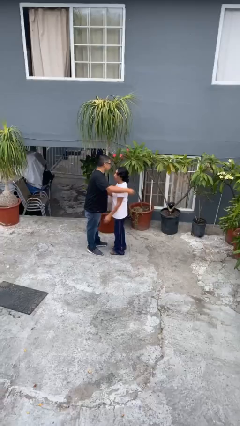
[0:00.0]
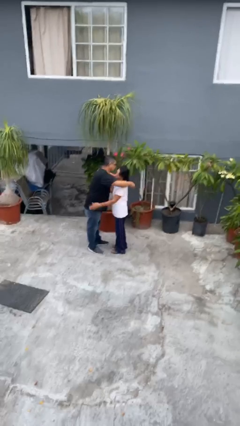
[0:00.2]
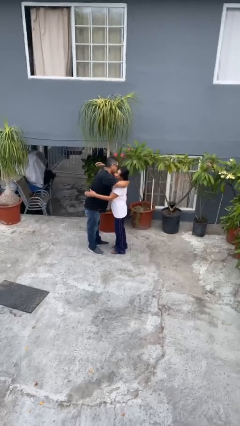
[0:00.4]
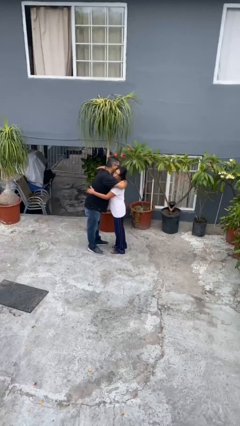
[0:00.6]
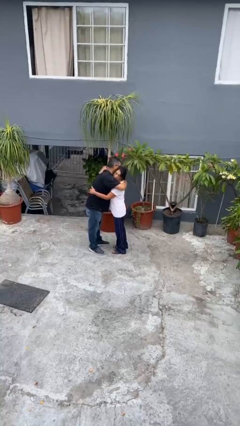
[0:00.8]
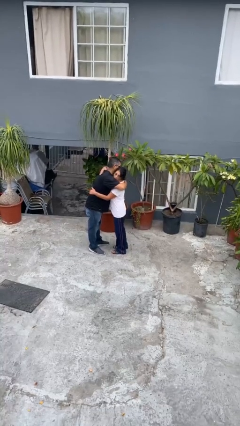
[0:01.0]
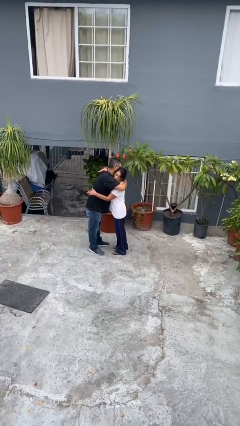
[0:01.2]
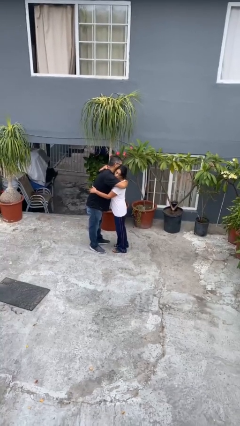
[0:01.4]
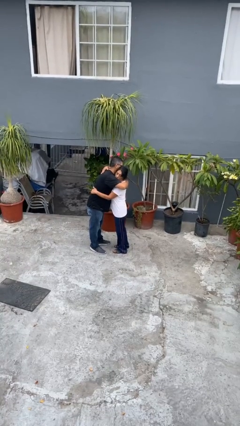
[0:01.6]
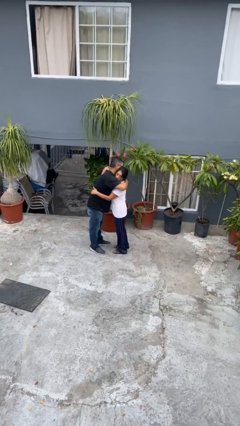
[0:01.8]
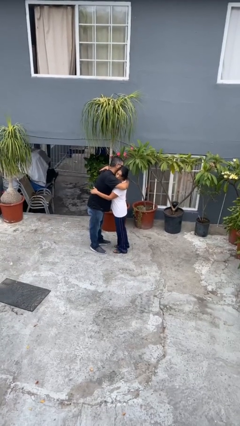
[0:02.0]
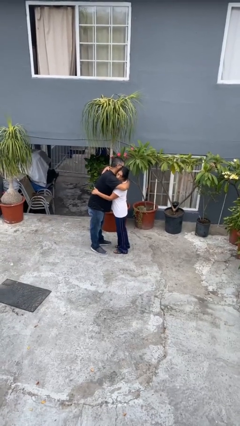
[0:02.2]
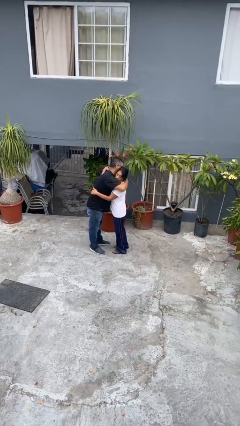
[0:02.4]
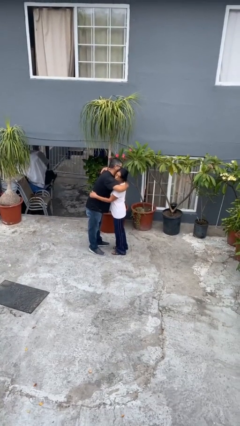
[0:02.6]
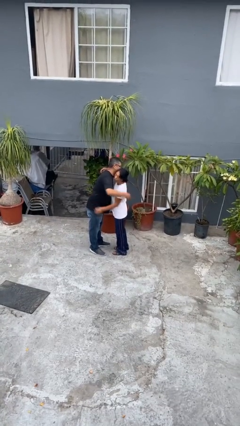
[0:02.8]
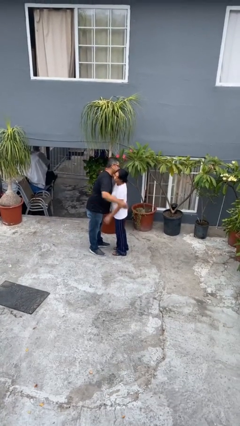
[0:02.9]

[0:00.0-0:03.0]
person embraces person

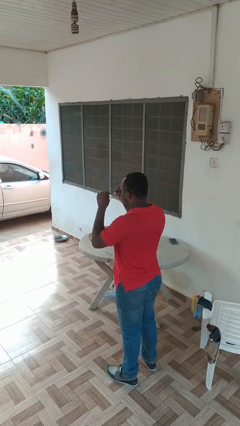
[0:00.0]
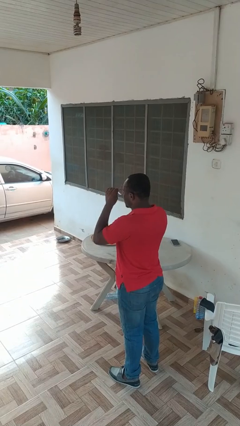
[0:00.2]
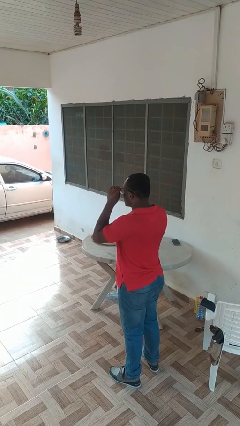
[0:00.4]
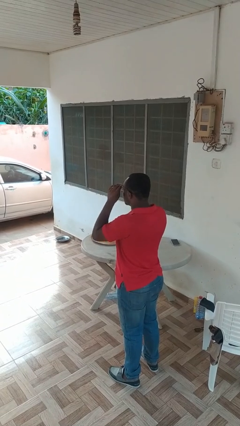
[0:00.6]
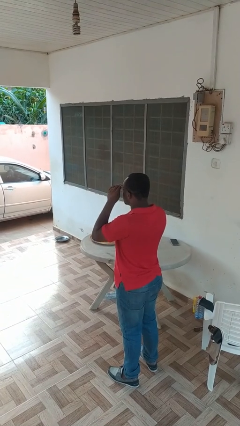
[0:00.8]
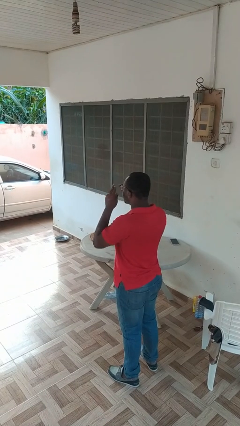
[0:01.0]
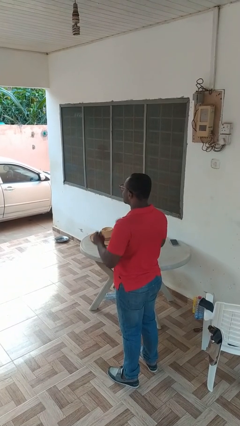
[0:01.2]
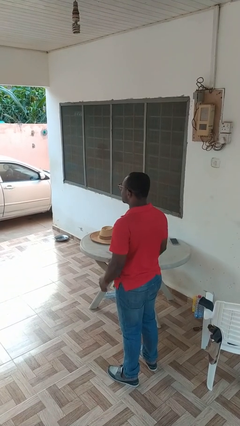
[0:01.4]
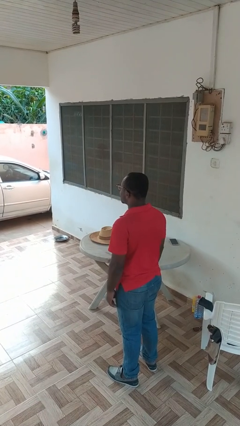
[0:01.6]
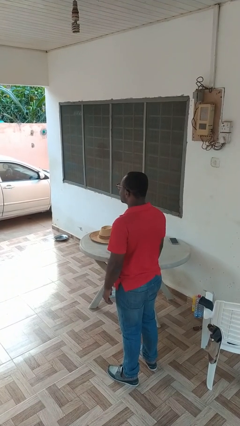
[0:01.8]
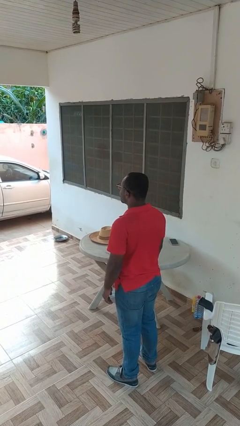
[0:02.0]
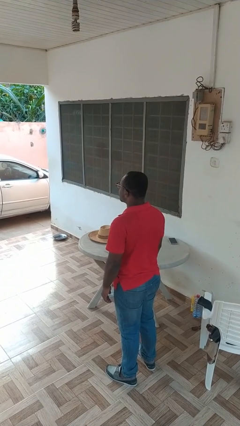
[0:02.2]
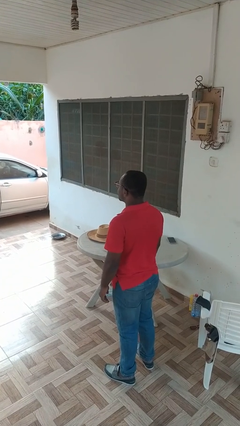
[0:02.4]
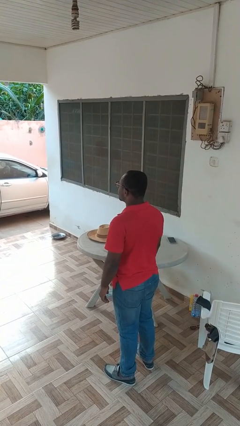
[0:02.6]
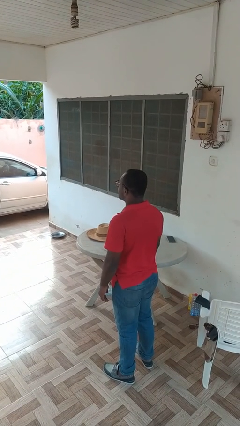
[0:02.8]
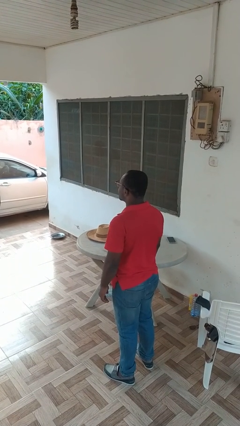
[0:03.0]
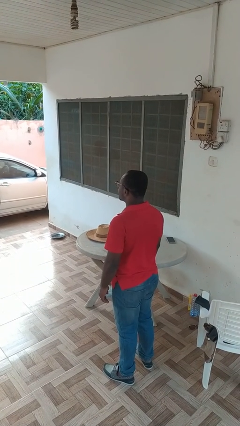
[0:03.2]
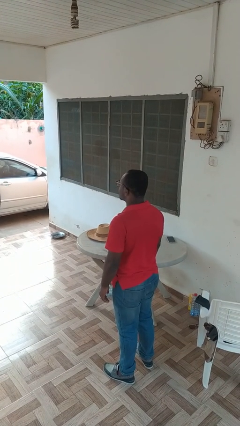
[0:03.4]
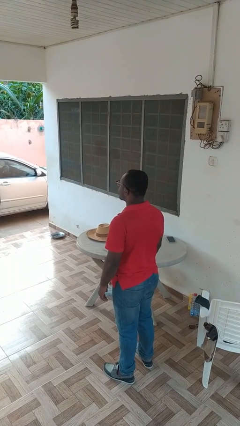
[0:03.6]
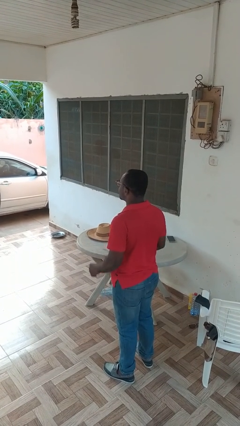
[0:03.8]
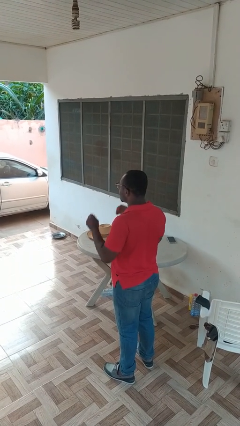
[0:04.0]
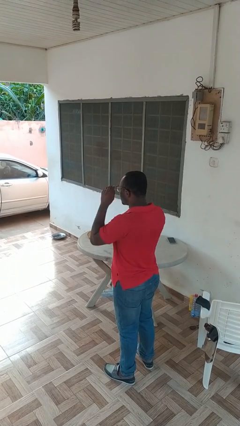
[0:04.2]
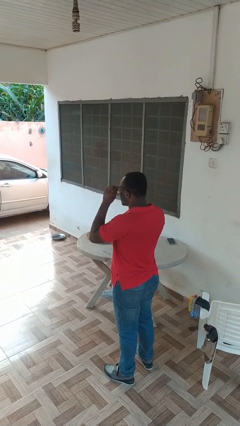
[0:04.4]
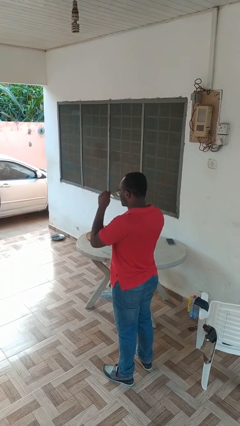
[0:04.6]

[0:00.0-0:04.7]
person puts on glasses

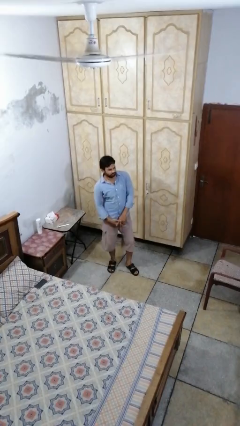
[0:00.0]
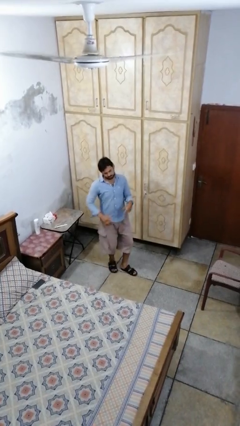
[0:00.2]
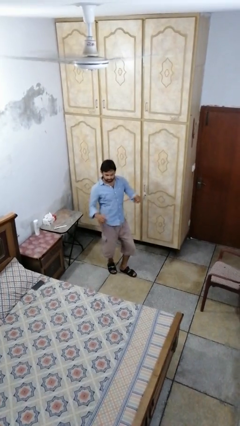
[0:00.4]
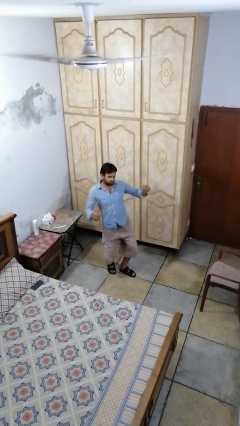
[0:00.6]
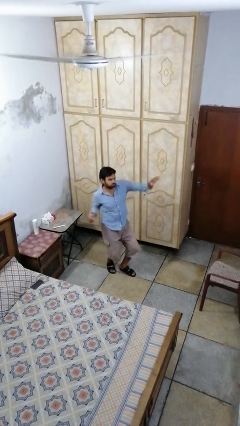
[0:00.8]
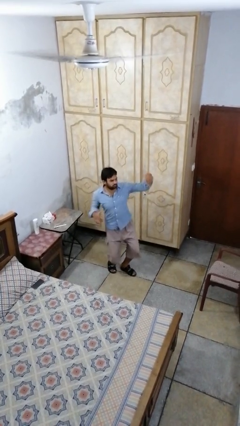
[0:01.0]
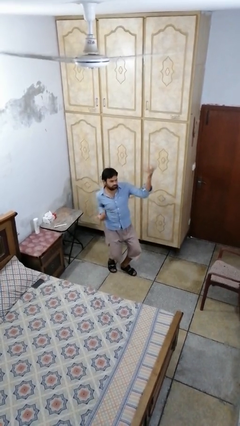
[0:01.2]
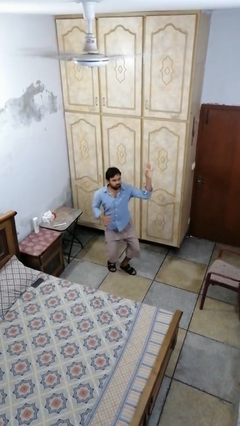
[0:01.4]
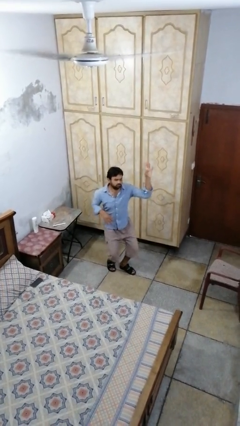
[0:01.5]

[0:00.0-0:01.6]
person dances in place

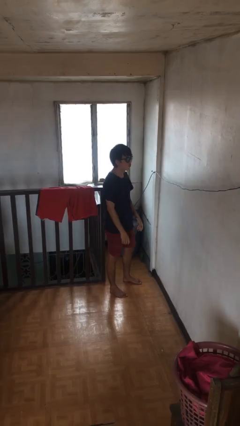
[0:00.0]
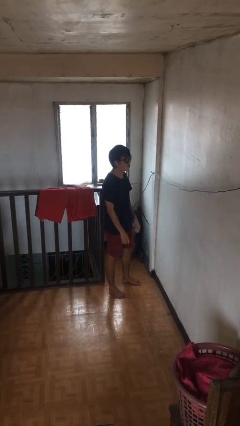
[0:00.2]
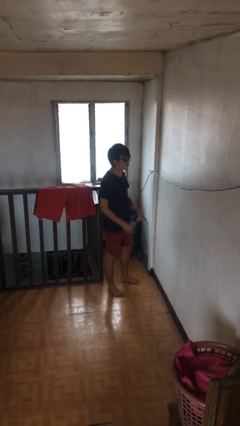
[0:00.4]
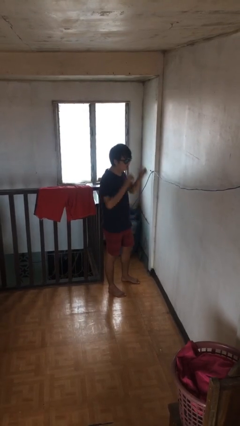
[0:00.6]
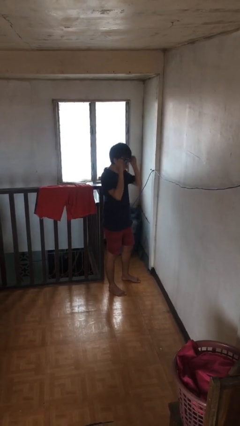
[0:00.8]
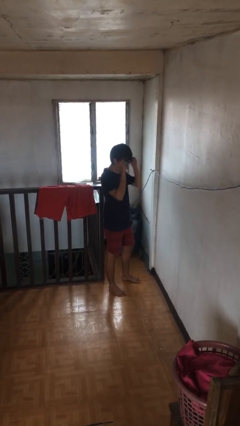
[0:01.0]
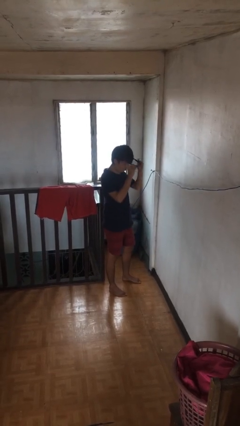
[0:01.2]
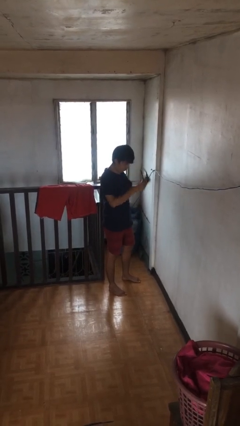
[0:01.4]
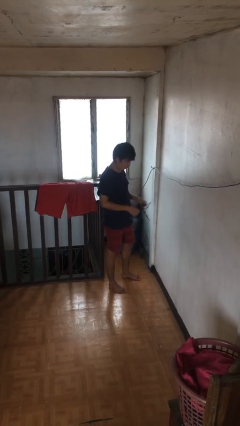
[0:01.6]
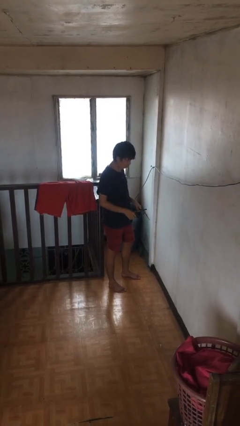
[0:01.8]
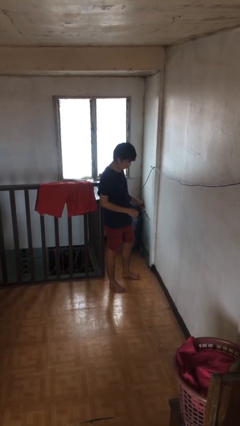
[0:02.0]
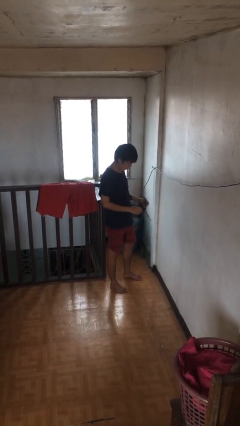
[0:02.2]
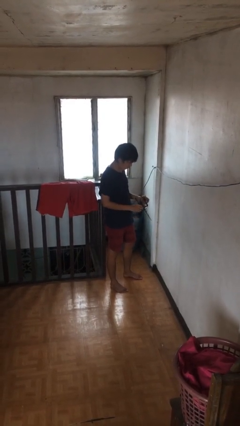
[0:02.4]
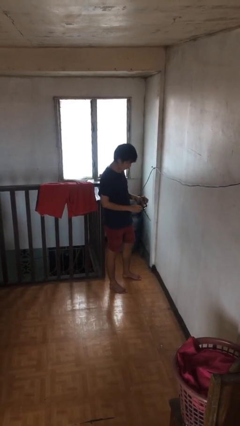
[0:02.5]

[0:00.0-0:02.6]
person takes off sunglasses

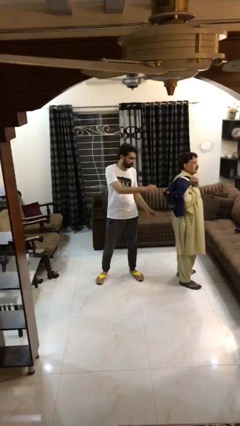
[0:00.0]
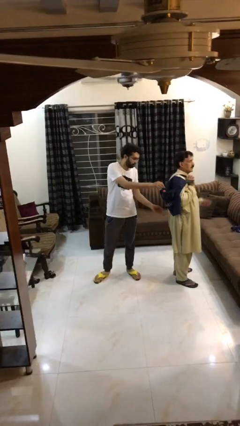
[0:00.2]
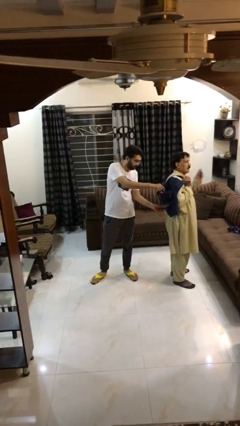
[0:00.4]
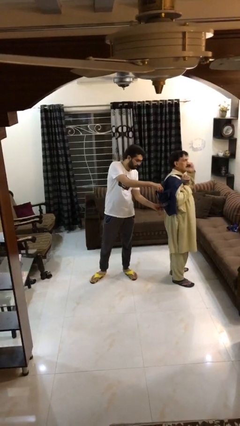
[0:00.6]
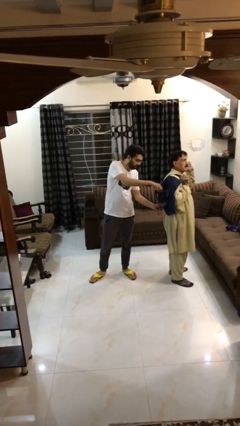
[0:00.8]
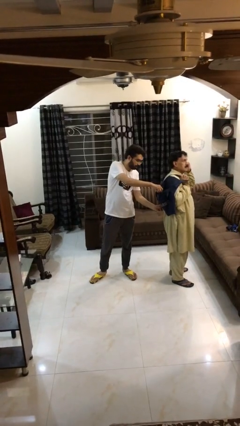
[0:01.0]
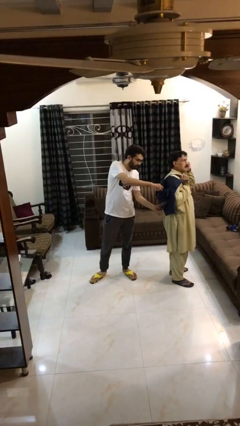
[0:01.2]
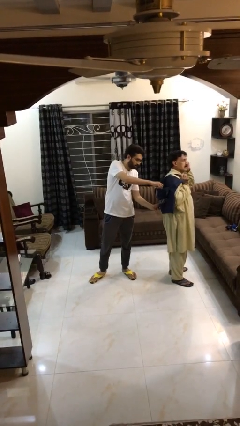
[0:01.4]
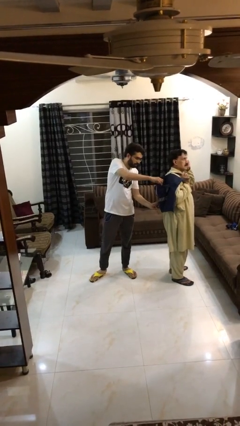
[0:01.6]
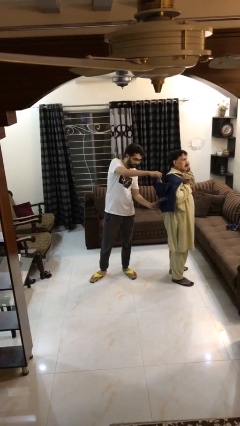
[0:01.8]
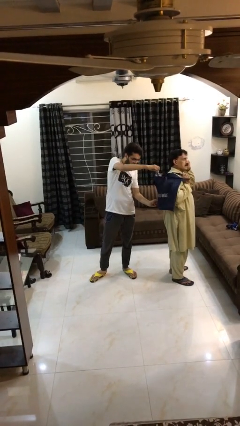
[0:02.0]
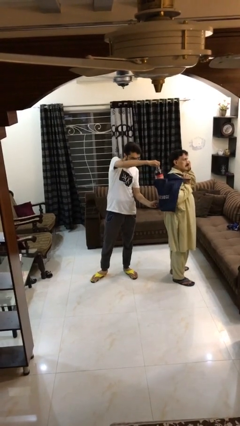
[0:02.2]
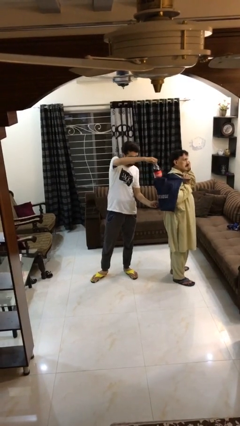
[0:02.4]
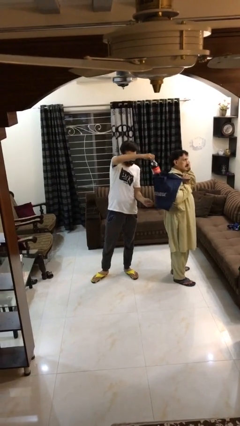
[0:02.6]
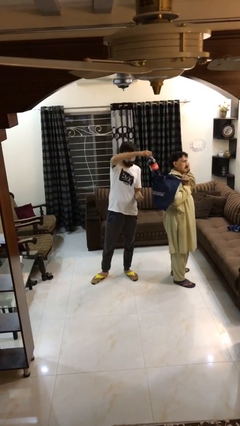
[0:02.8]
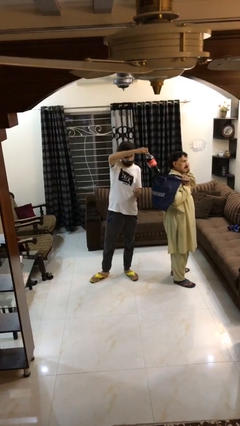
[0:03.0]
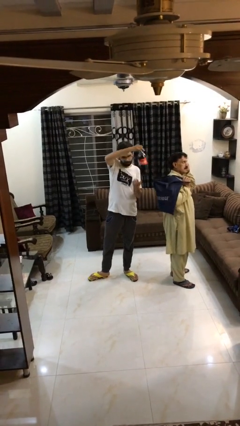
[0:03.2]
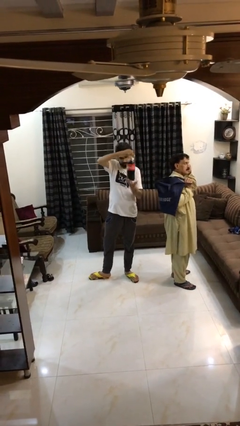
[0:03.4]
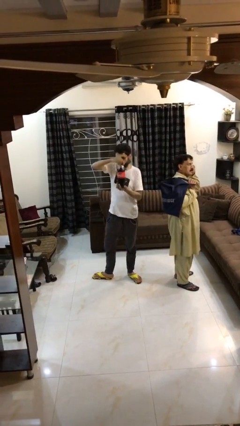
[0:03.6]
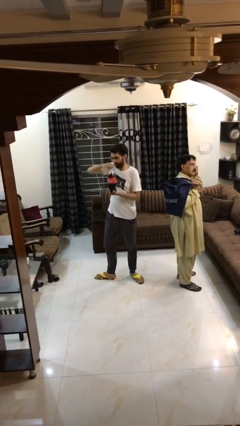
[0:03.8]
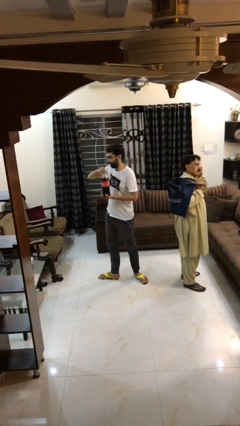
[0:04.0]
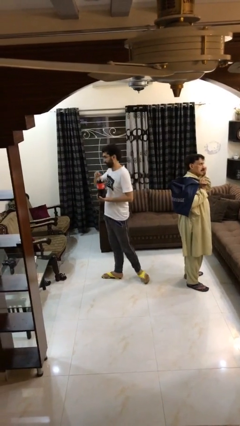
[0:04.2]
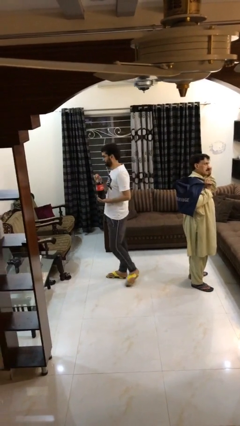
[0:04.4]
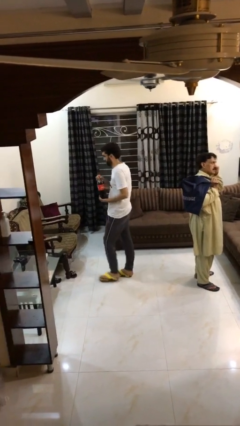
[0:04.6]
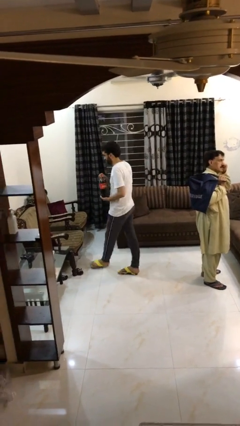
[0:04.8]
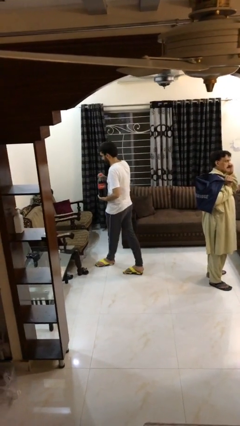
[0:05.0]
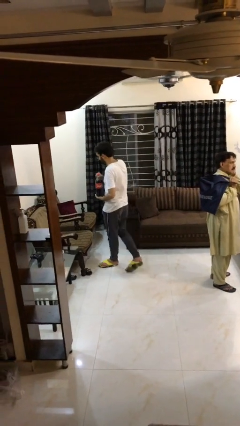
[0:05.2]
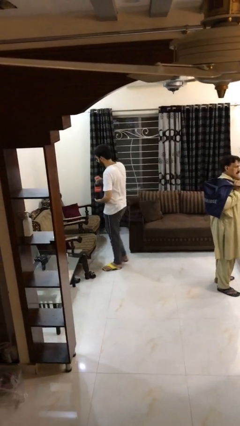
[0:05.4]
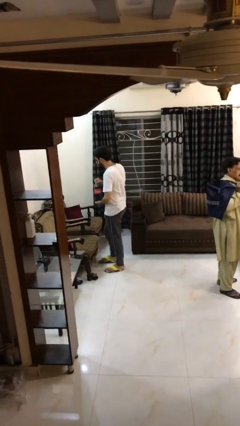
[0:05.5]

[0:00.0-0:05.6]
person steals object from person

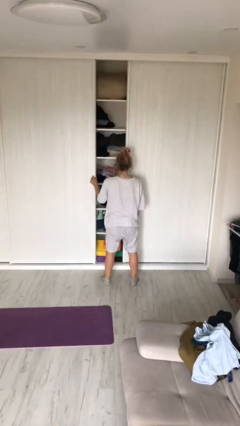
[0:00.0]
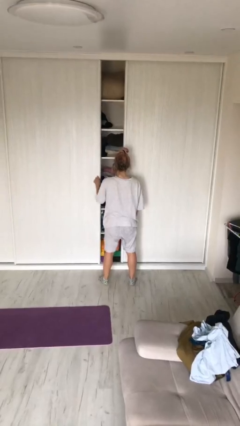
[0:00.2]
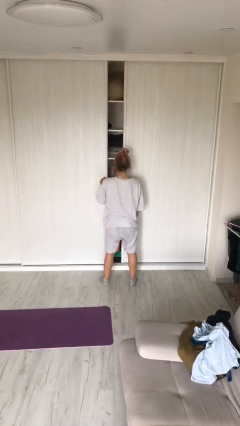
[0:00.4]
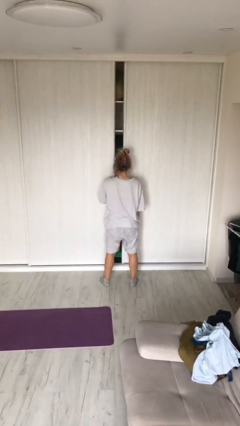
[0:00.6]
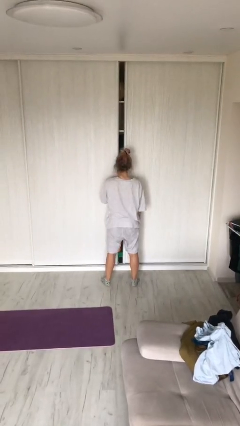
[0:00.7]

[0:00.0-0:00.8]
person closes sliding door
